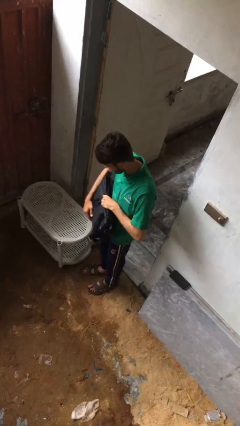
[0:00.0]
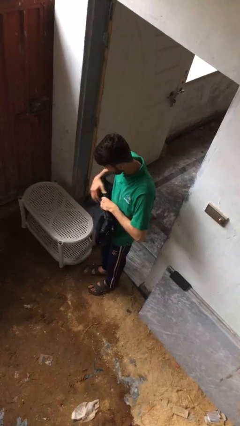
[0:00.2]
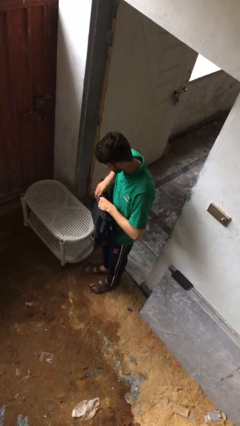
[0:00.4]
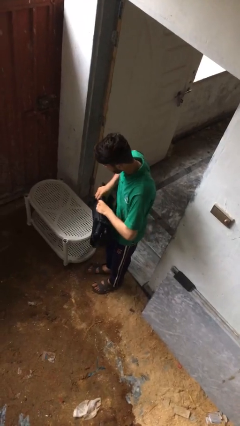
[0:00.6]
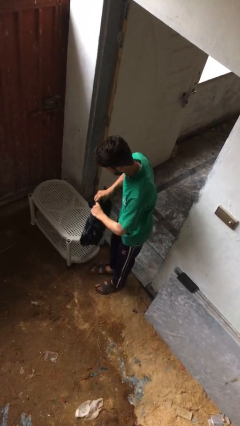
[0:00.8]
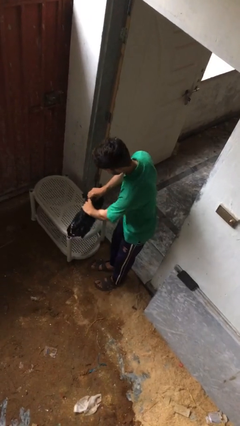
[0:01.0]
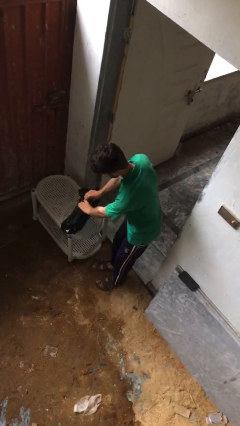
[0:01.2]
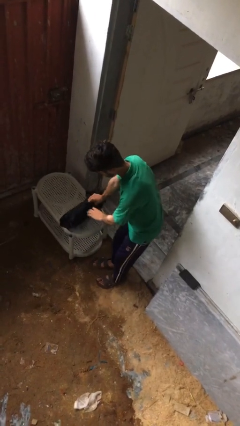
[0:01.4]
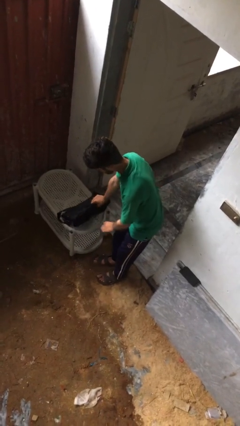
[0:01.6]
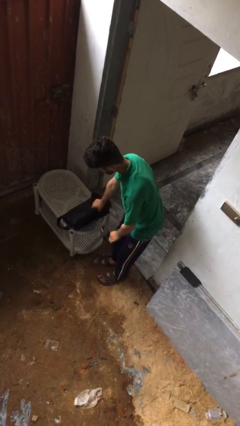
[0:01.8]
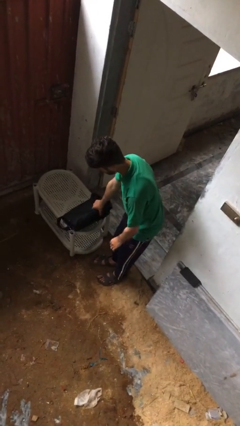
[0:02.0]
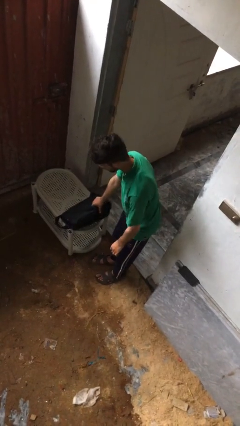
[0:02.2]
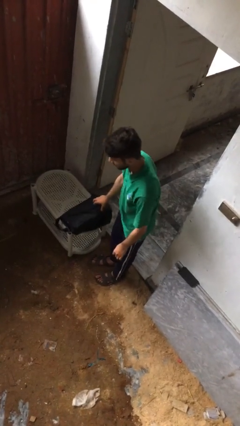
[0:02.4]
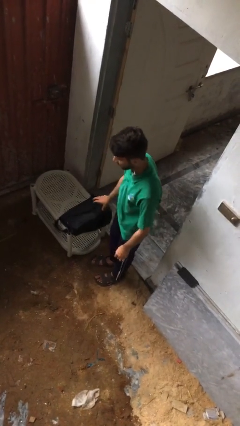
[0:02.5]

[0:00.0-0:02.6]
person puts down object on table

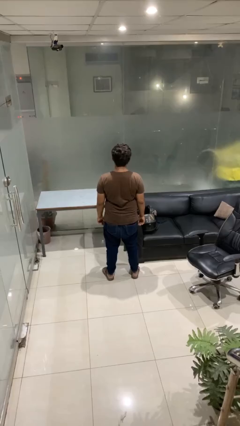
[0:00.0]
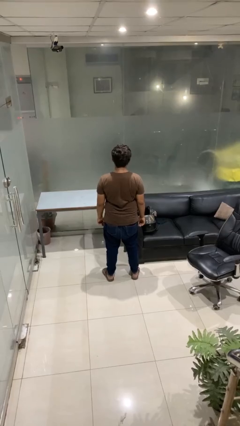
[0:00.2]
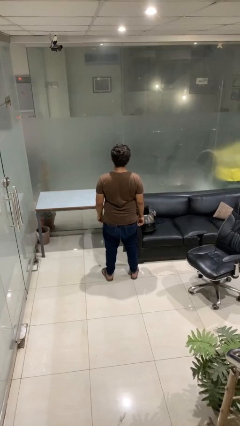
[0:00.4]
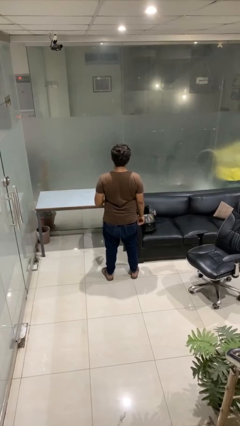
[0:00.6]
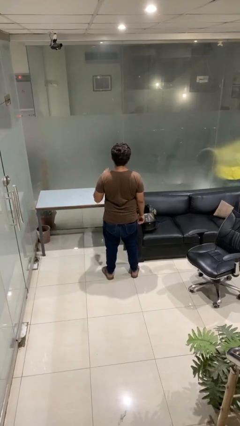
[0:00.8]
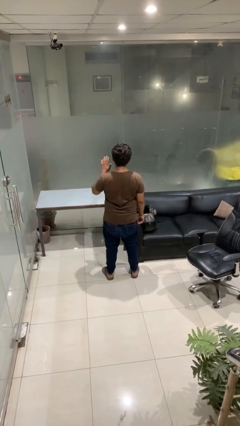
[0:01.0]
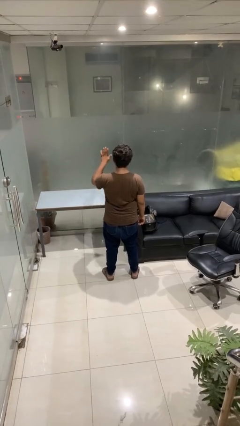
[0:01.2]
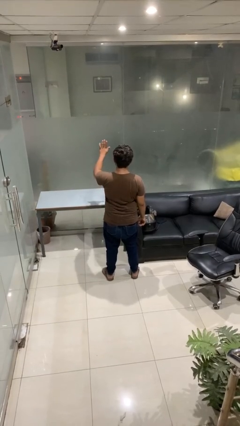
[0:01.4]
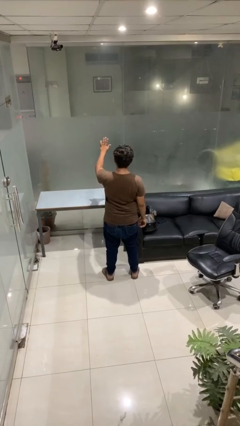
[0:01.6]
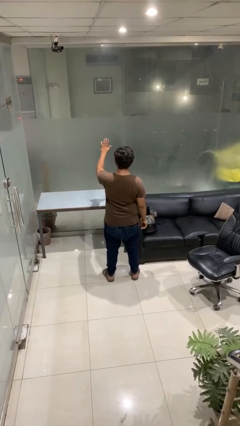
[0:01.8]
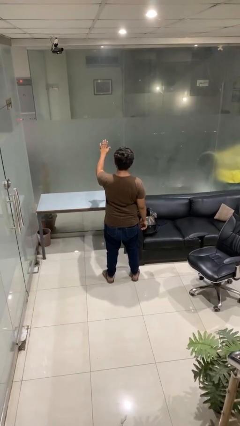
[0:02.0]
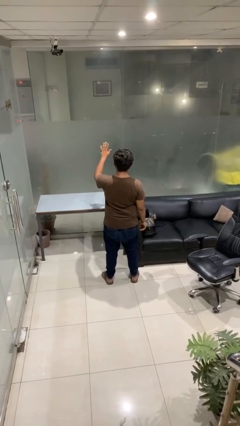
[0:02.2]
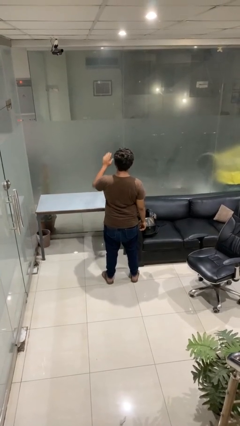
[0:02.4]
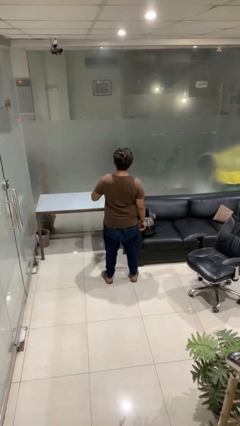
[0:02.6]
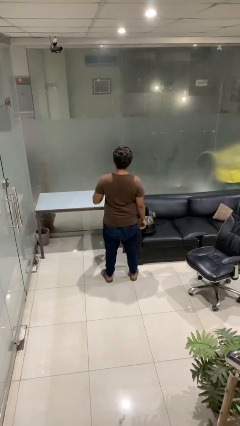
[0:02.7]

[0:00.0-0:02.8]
person gestures stop

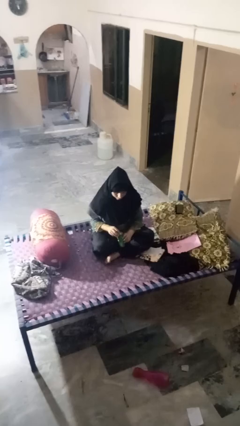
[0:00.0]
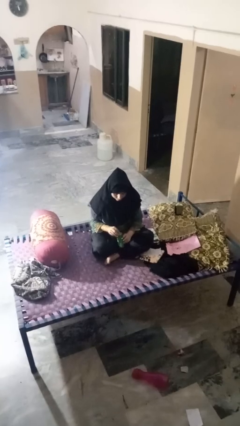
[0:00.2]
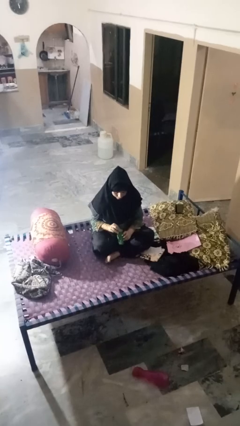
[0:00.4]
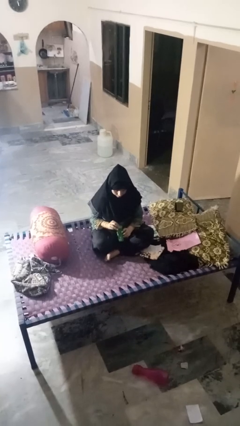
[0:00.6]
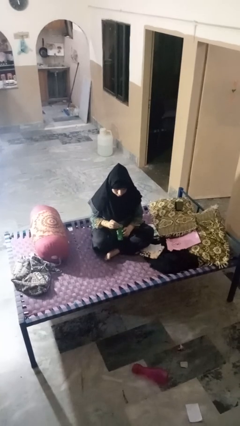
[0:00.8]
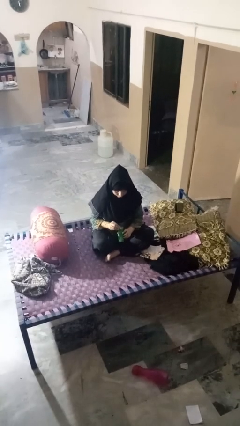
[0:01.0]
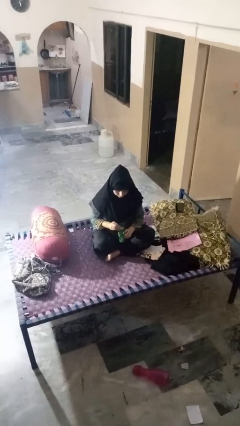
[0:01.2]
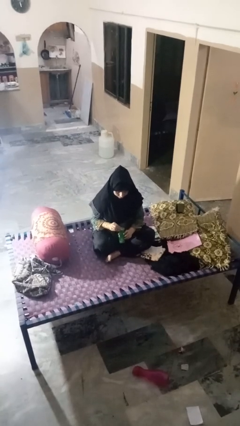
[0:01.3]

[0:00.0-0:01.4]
person opens can with can opener

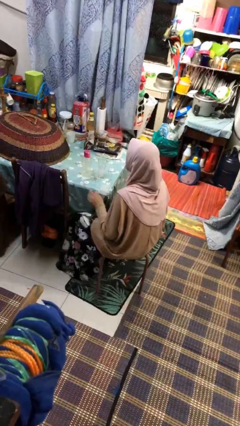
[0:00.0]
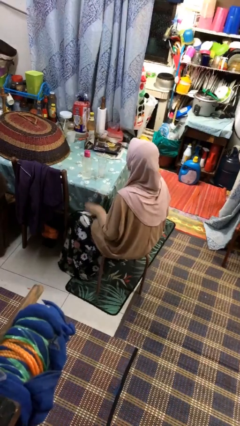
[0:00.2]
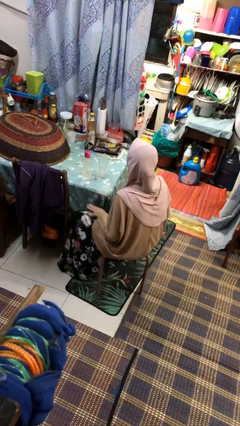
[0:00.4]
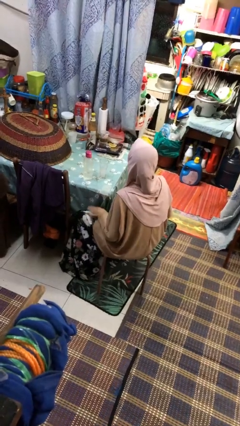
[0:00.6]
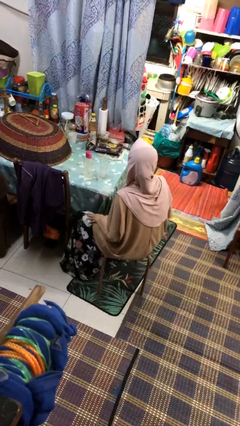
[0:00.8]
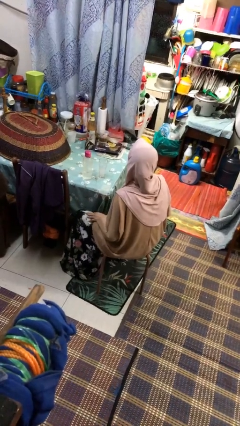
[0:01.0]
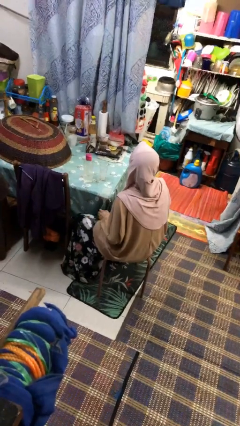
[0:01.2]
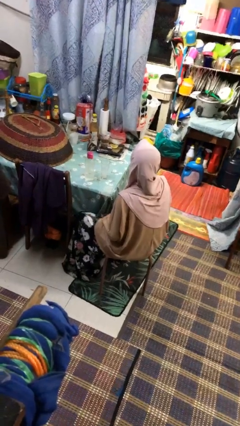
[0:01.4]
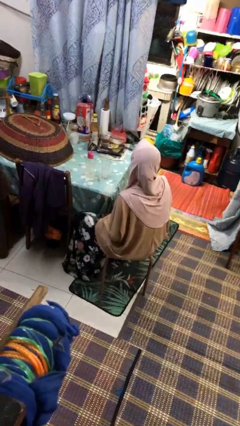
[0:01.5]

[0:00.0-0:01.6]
person slaps hands on thighs

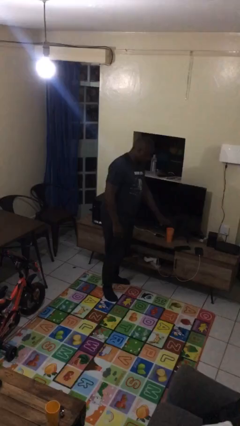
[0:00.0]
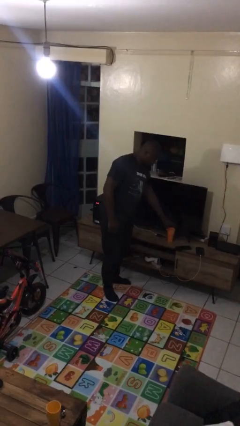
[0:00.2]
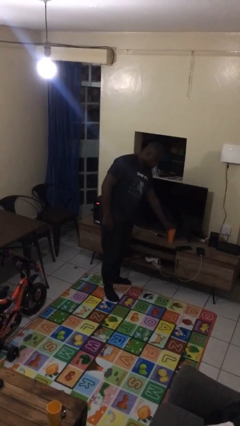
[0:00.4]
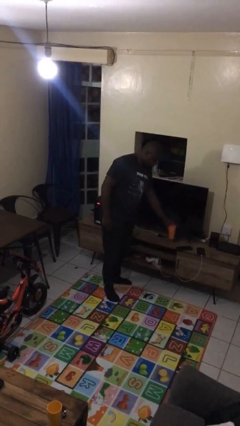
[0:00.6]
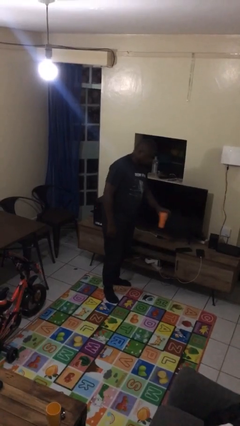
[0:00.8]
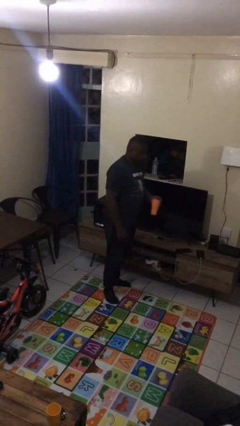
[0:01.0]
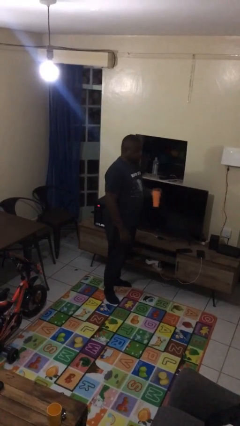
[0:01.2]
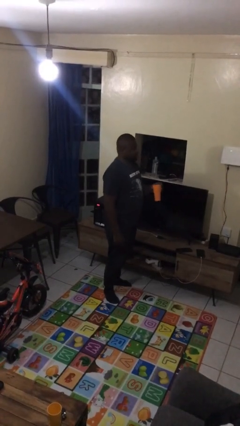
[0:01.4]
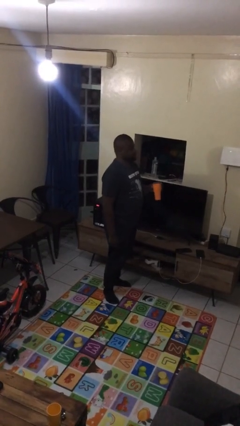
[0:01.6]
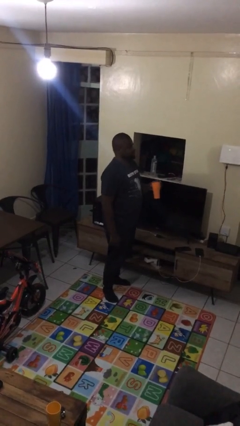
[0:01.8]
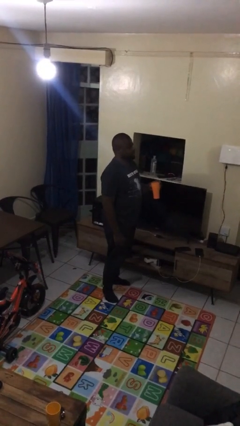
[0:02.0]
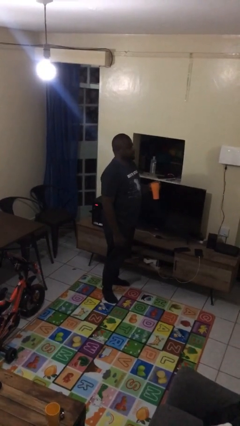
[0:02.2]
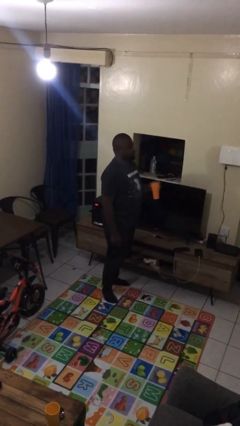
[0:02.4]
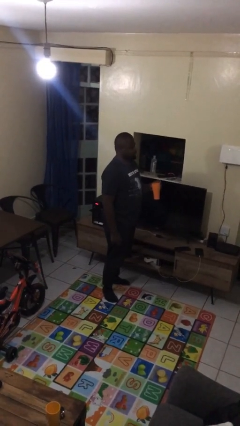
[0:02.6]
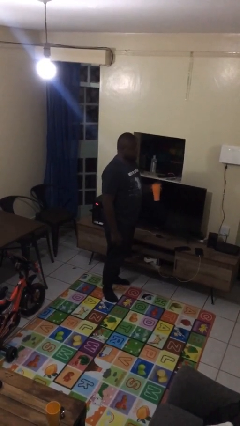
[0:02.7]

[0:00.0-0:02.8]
person picks up object from countertop

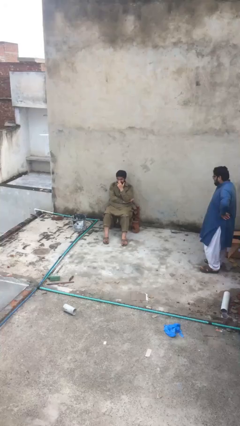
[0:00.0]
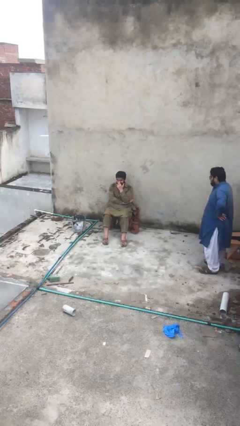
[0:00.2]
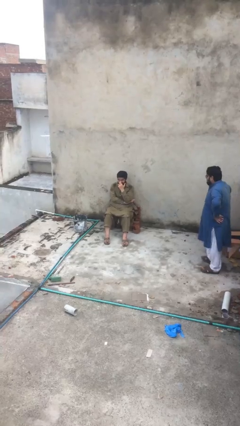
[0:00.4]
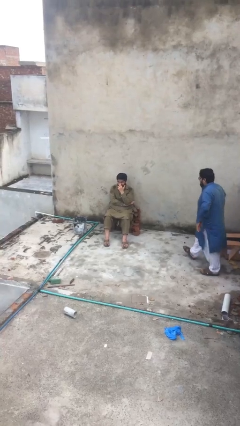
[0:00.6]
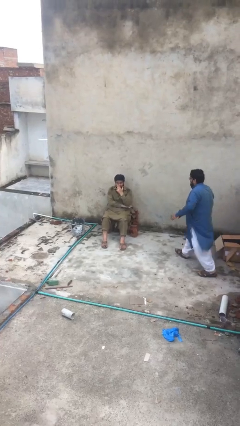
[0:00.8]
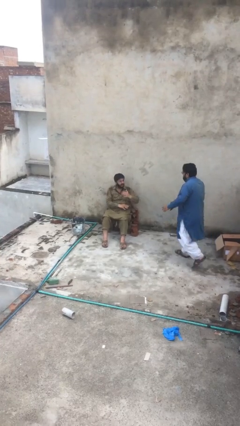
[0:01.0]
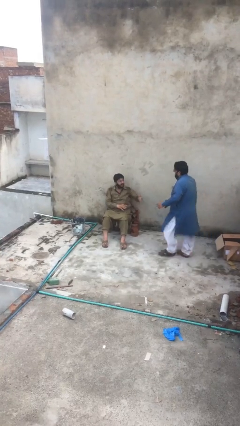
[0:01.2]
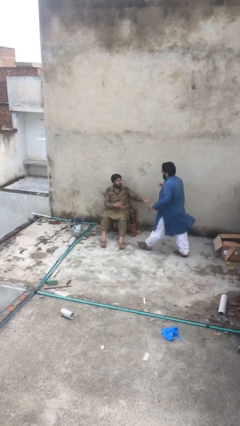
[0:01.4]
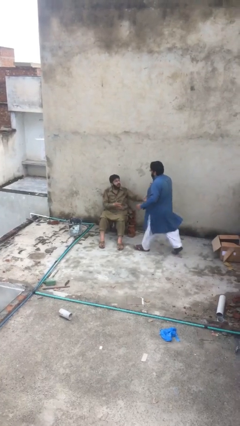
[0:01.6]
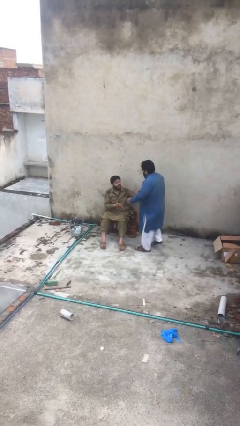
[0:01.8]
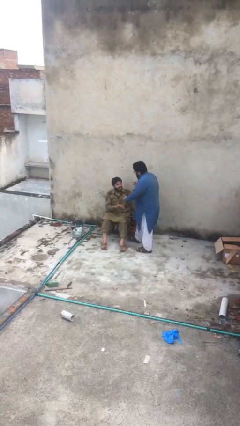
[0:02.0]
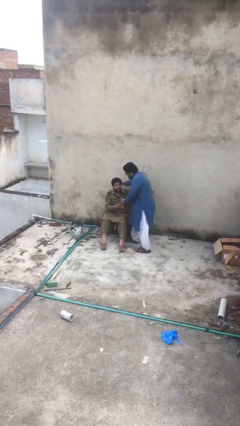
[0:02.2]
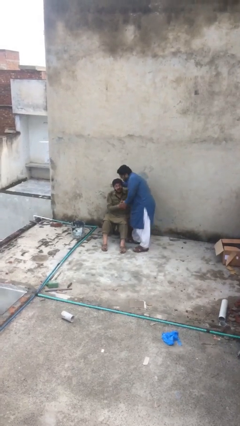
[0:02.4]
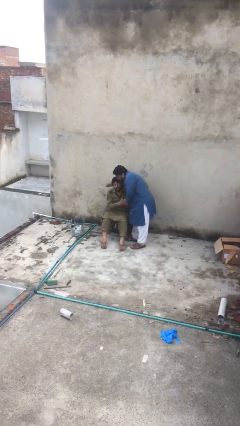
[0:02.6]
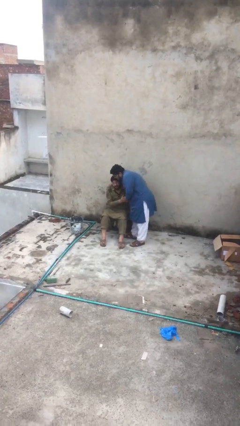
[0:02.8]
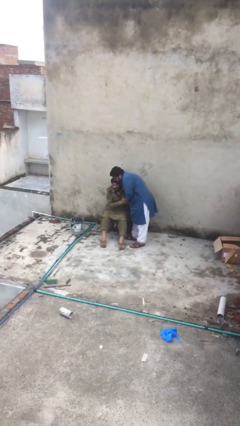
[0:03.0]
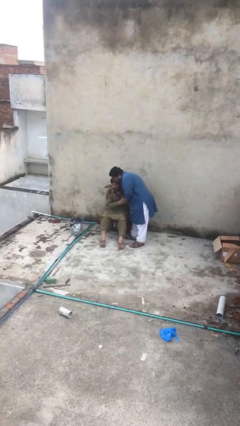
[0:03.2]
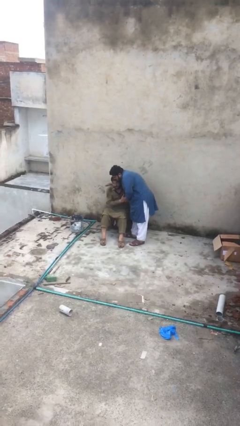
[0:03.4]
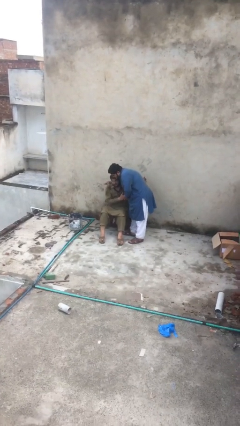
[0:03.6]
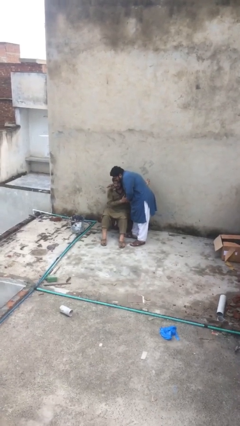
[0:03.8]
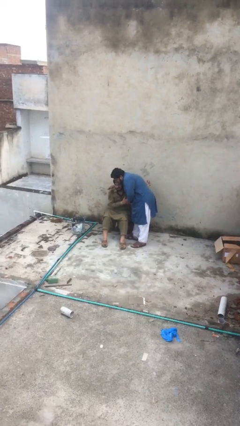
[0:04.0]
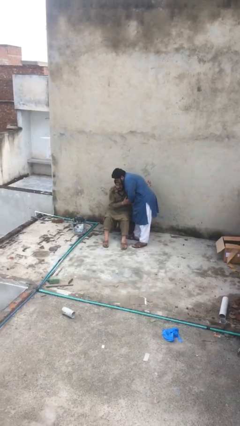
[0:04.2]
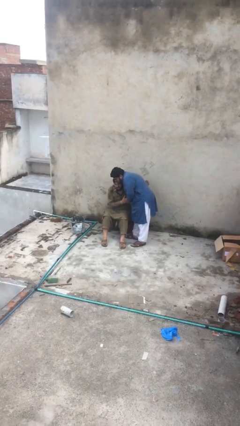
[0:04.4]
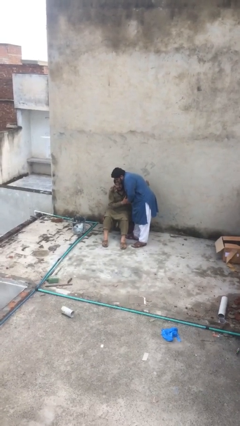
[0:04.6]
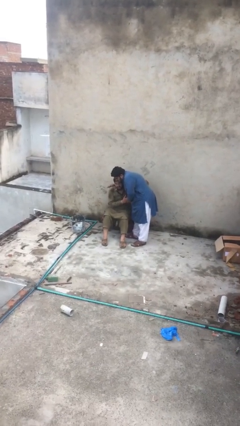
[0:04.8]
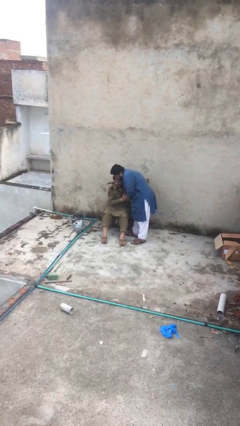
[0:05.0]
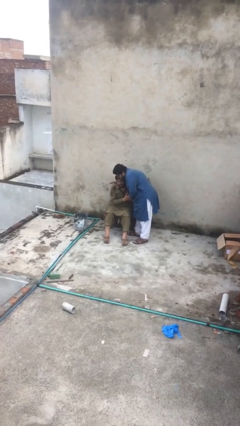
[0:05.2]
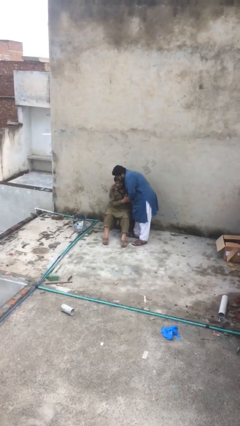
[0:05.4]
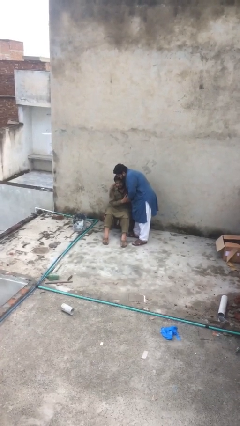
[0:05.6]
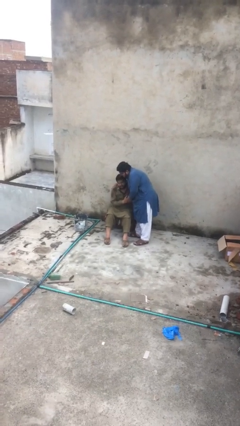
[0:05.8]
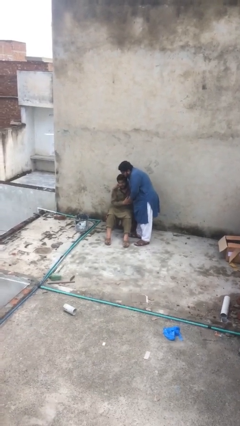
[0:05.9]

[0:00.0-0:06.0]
person embraces person
